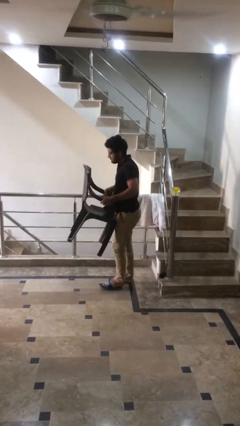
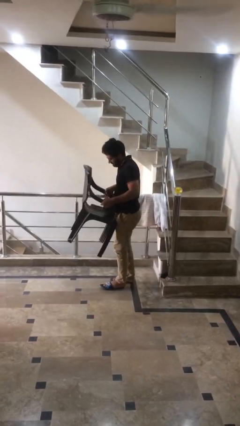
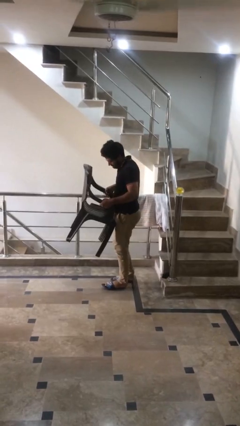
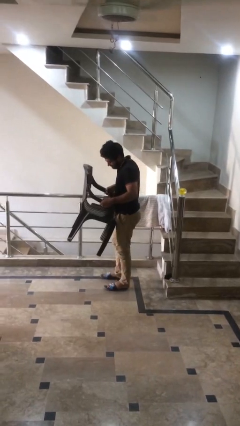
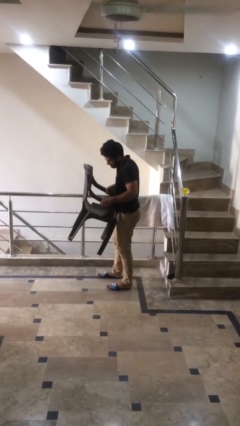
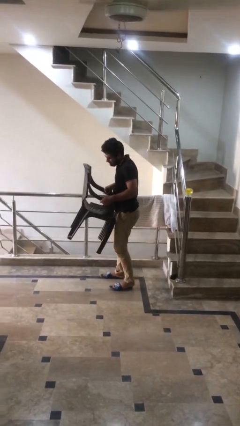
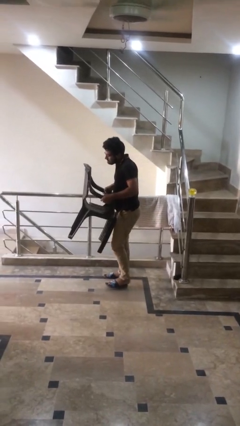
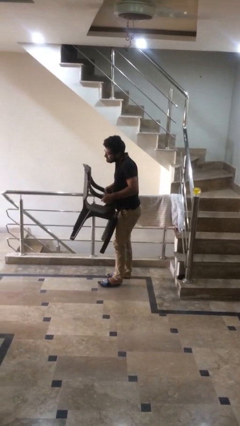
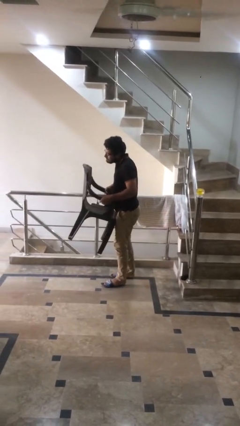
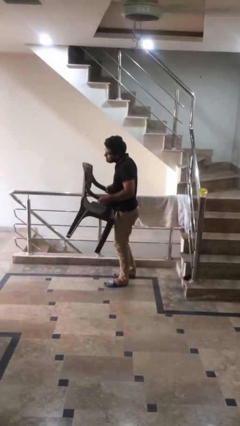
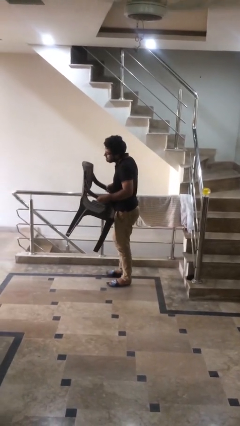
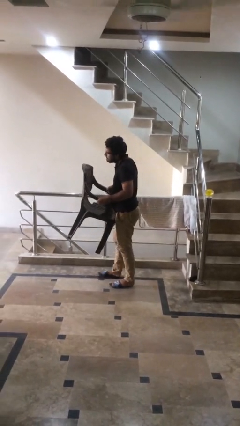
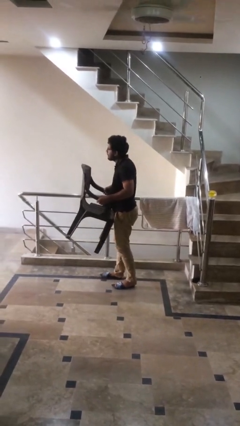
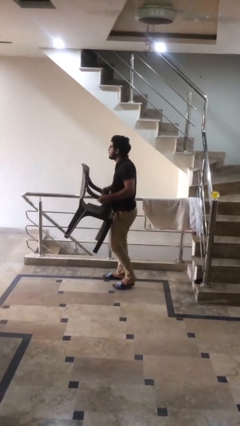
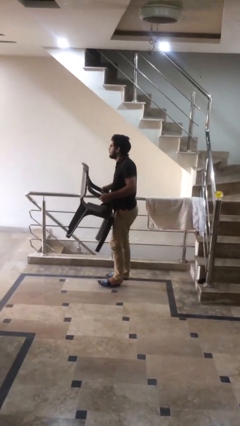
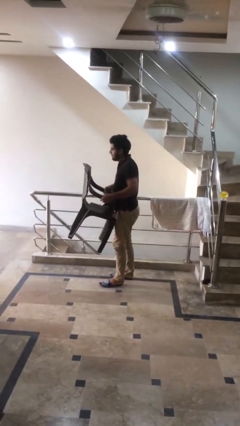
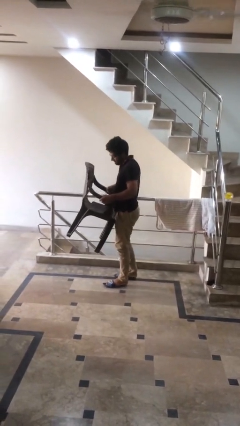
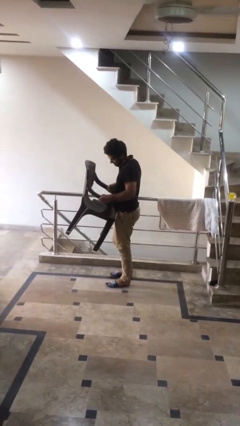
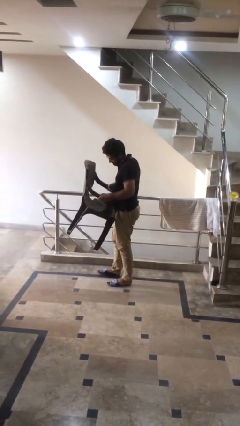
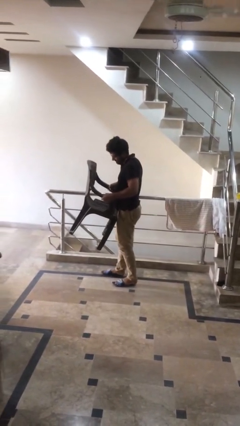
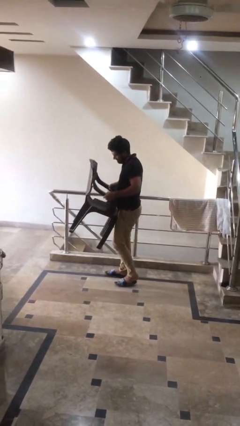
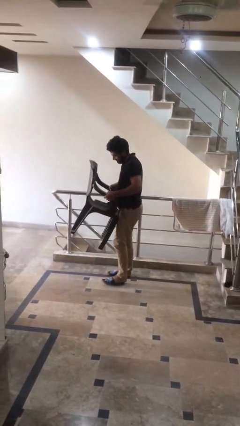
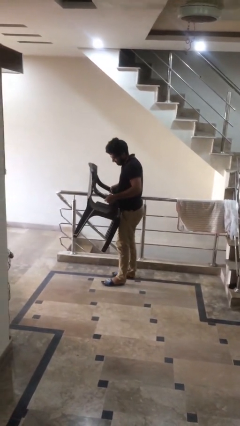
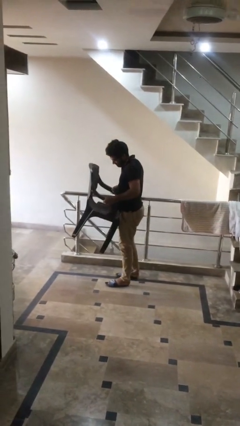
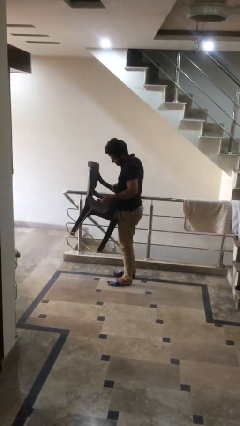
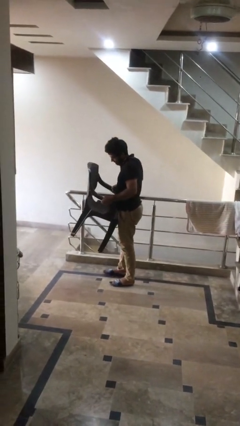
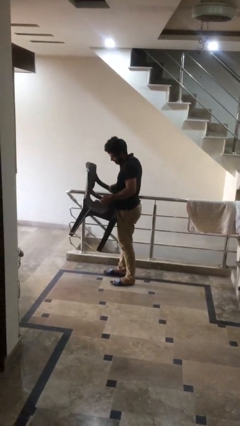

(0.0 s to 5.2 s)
person carries heavy object

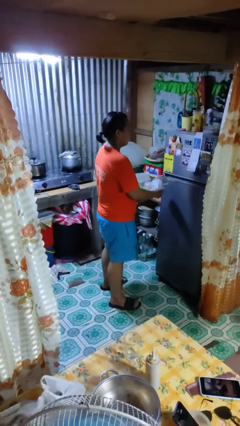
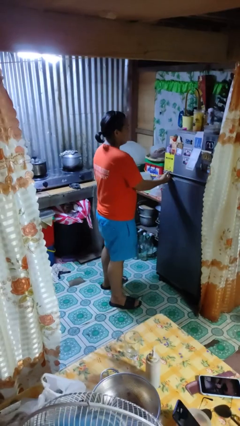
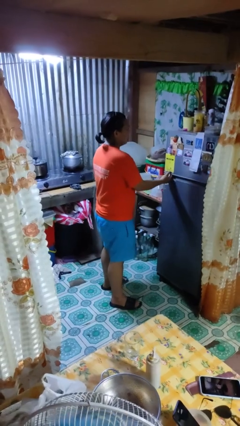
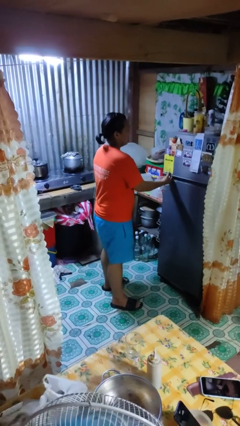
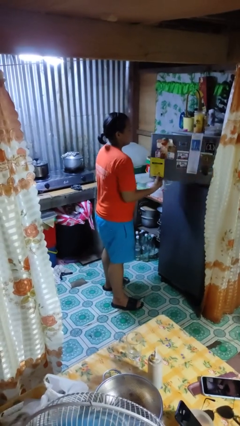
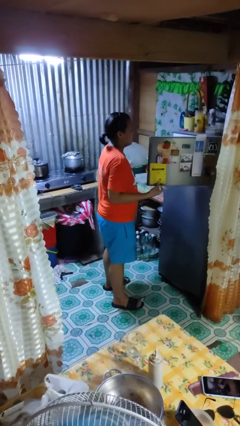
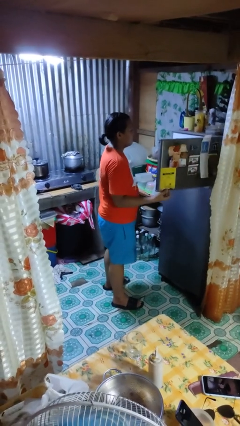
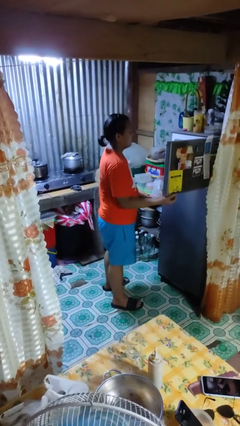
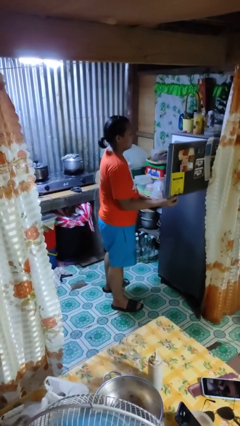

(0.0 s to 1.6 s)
person opens refrigerator

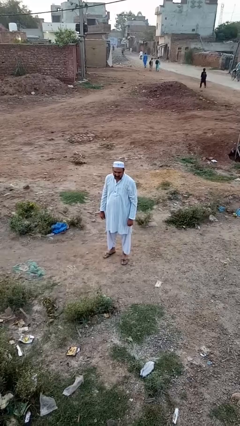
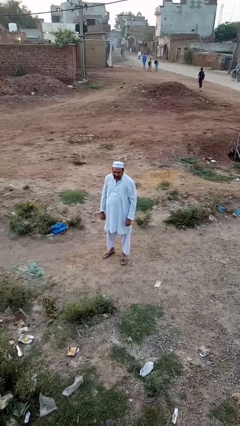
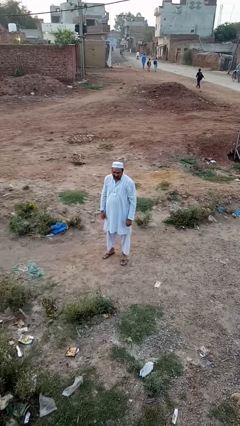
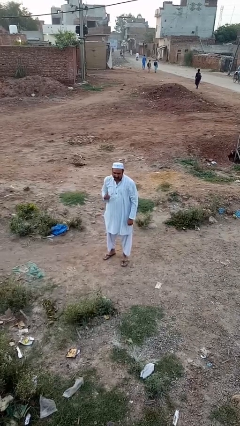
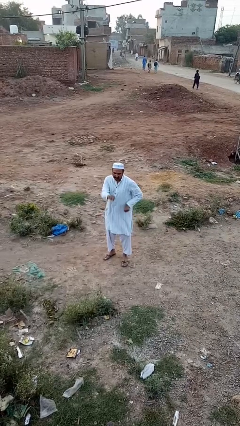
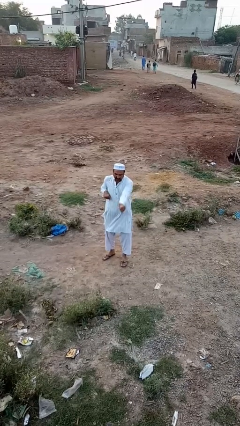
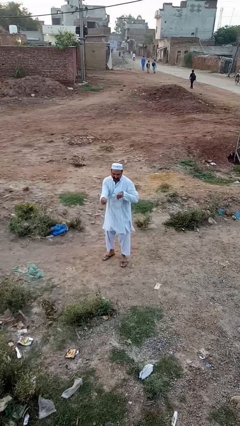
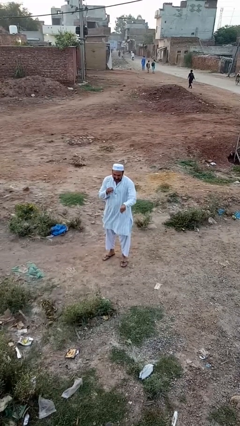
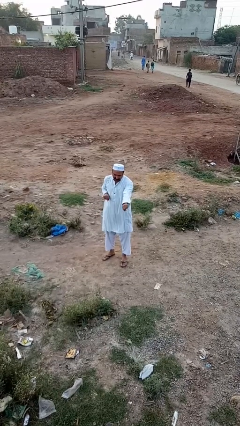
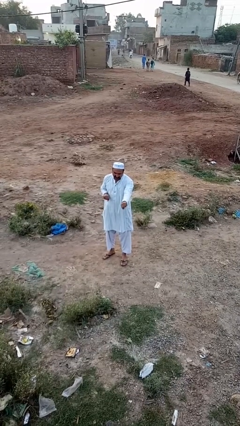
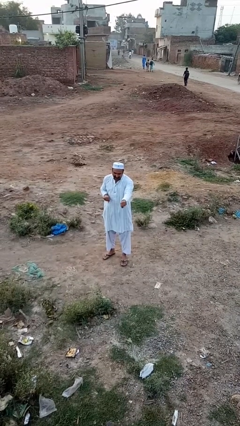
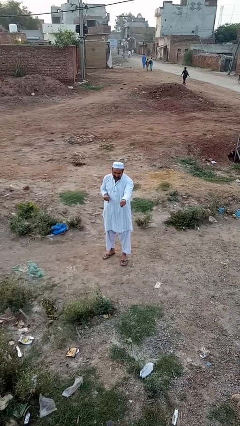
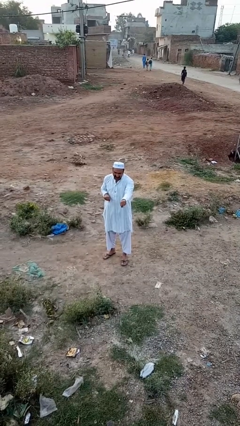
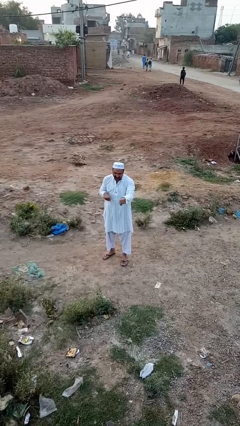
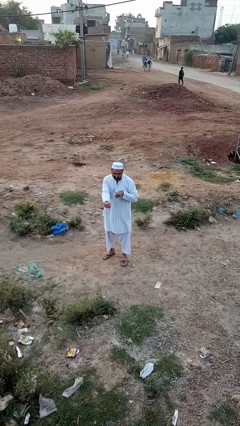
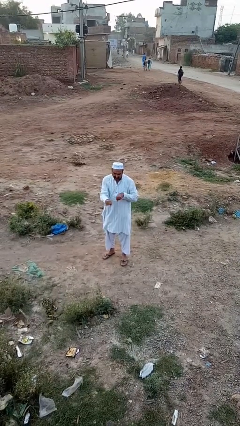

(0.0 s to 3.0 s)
person punches

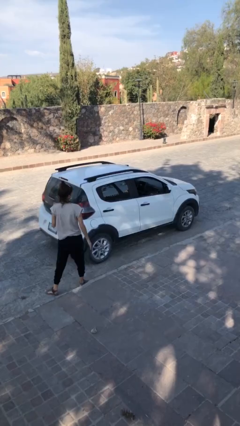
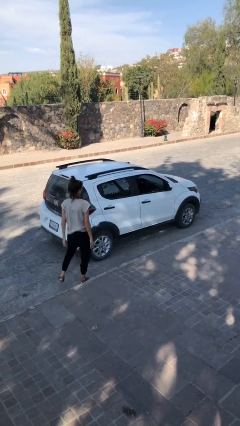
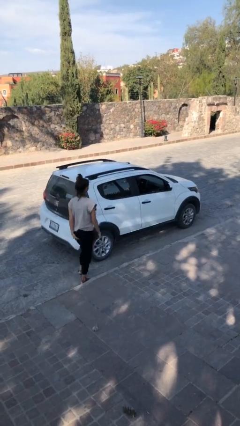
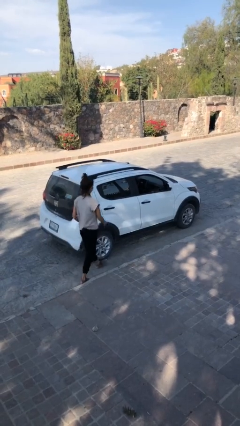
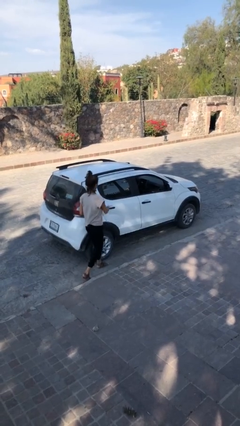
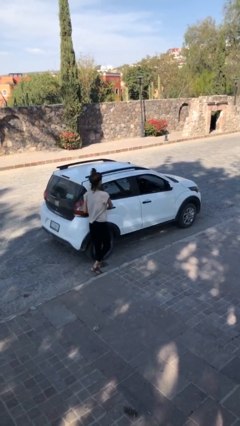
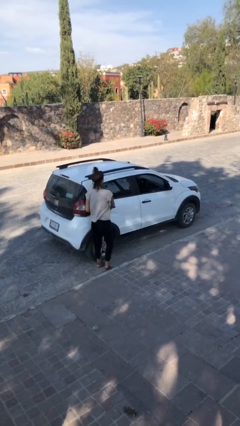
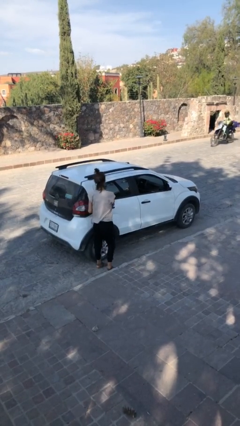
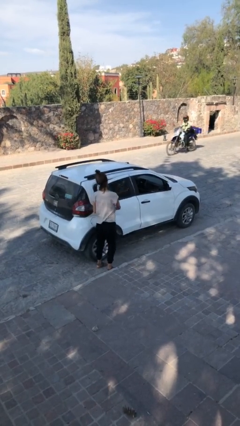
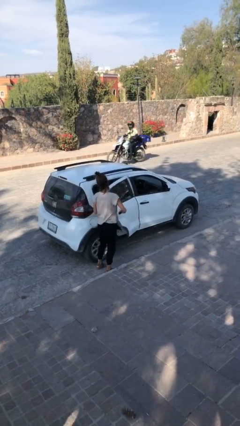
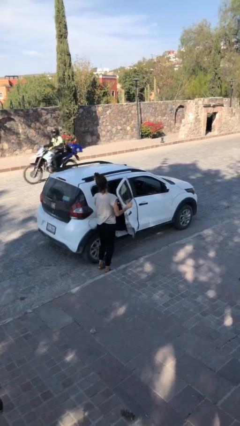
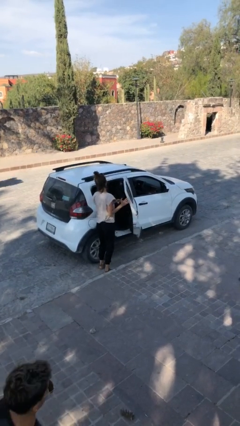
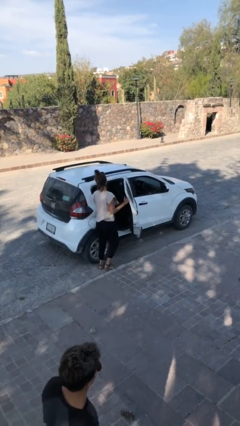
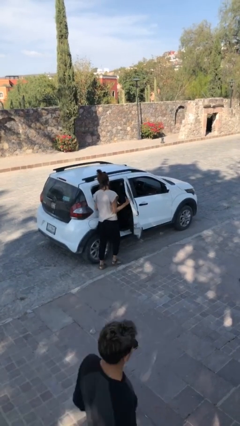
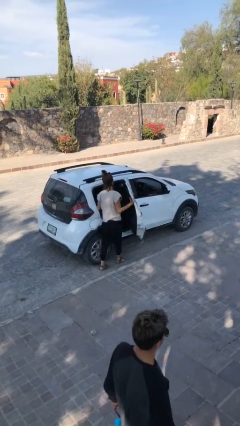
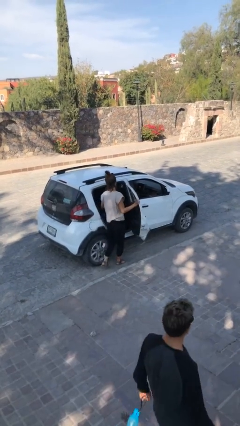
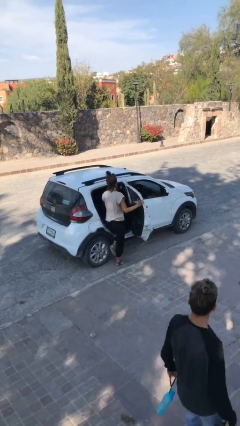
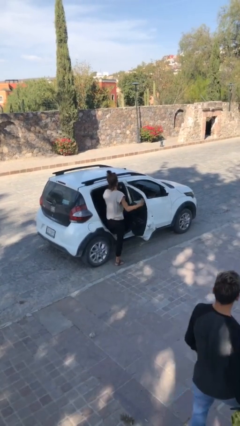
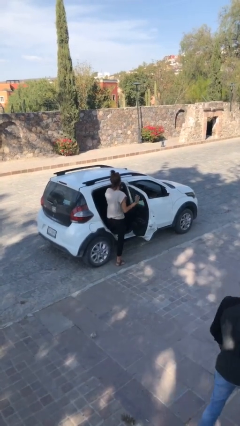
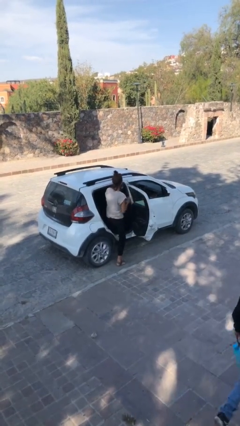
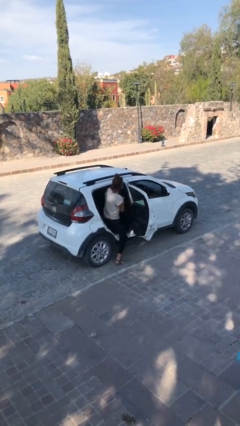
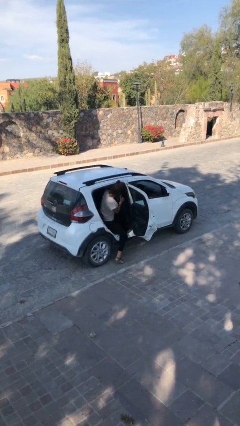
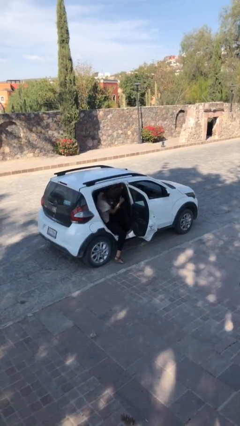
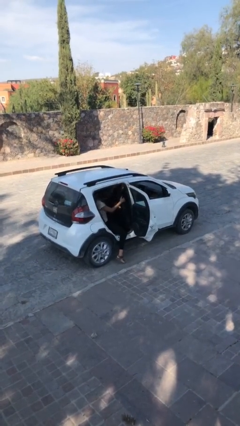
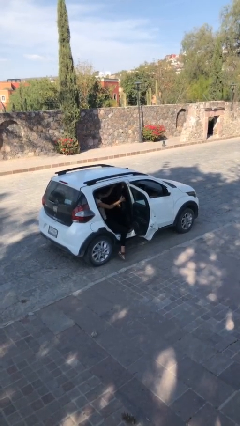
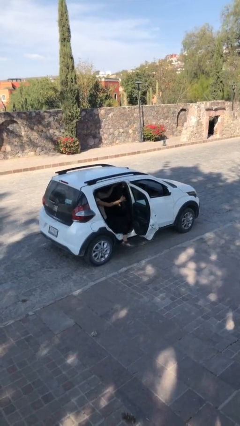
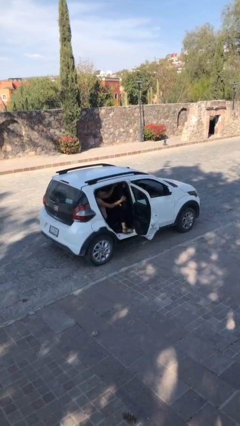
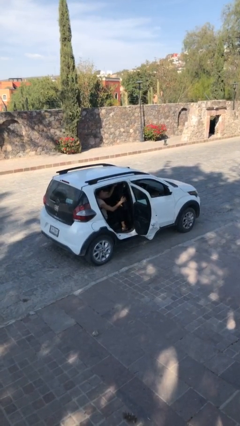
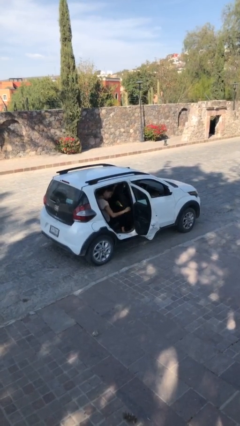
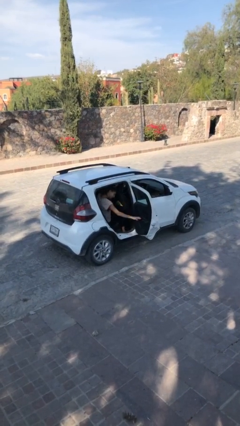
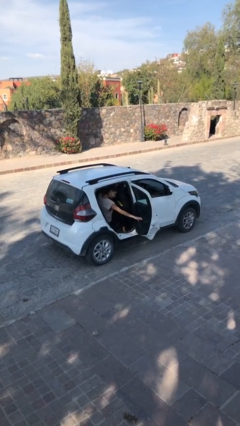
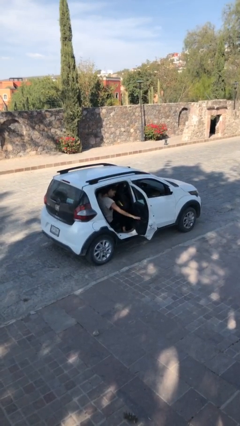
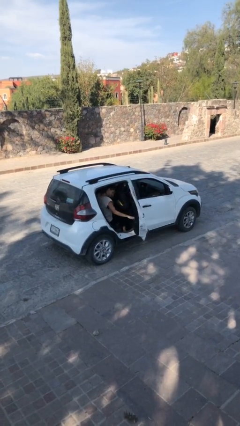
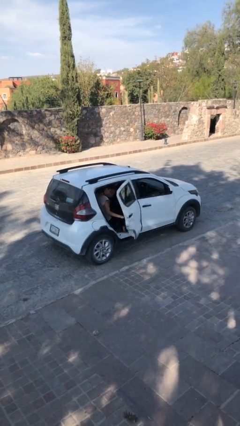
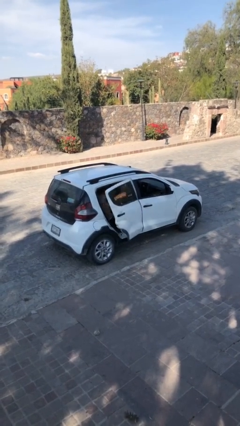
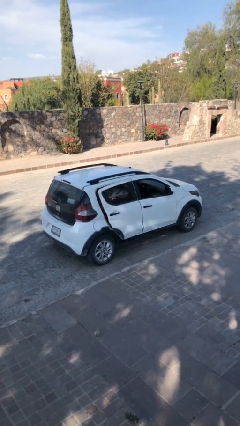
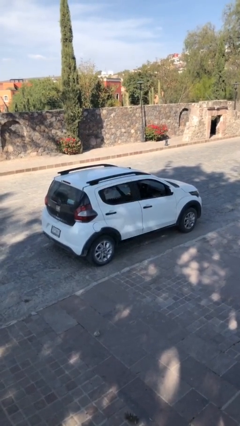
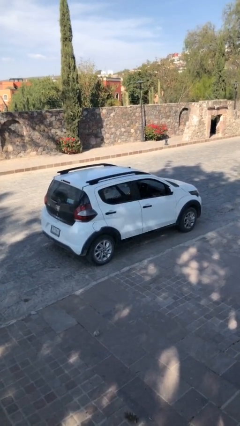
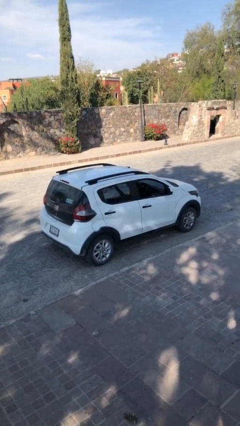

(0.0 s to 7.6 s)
car picks up person
